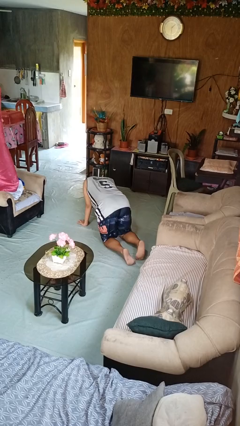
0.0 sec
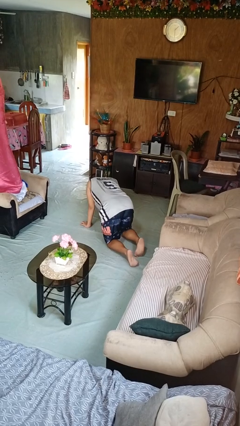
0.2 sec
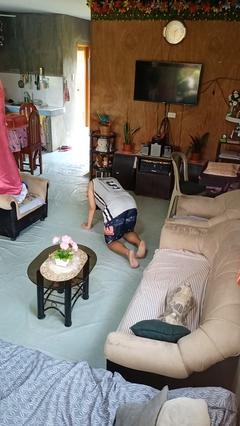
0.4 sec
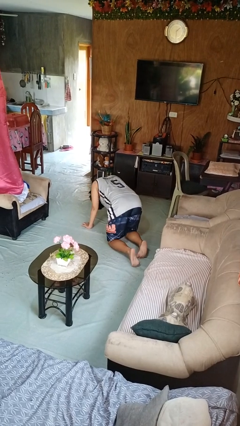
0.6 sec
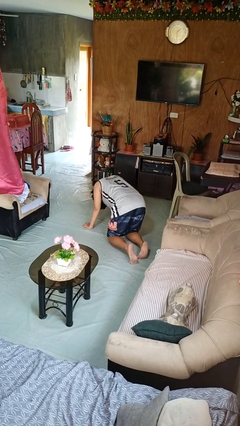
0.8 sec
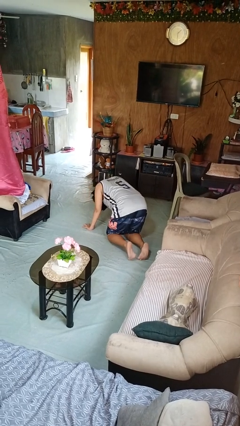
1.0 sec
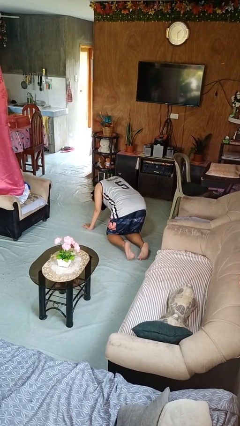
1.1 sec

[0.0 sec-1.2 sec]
person crawls

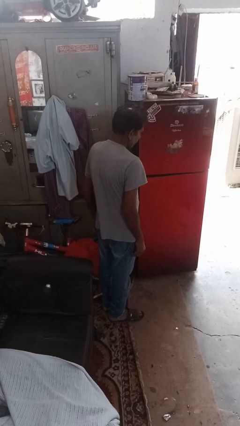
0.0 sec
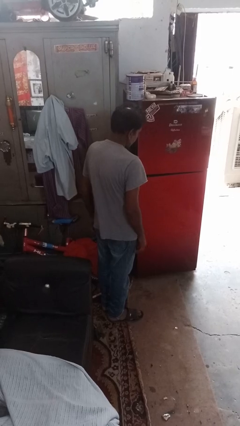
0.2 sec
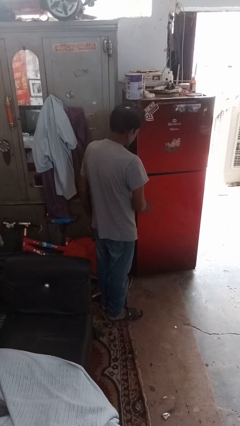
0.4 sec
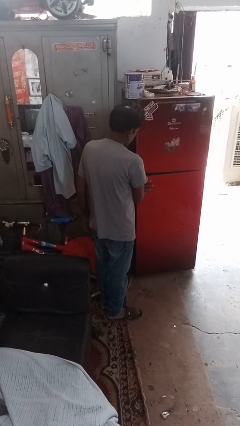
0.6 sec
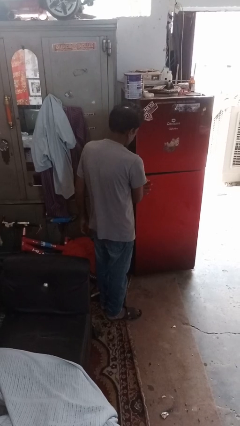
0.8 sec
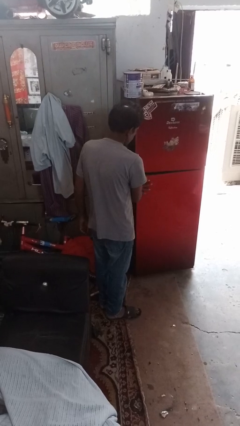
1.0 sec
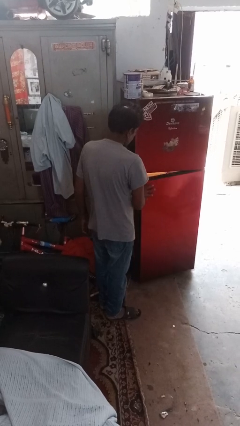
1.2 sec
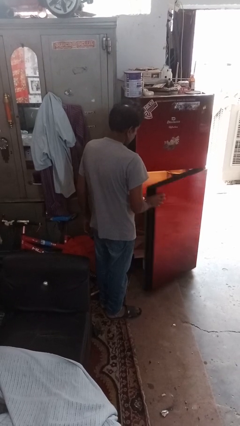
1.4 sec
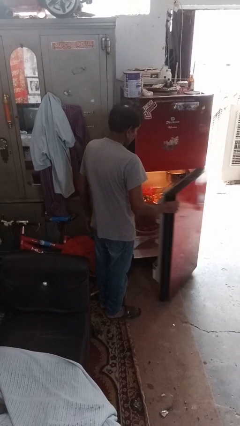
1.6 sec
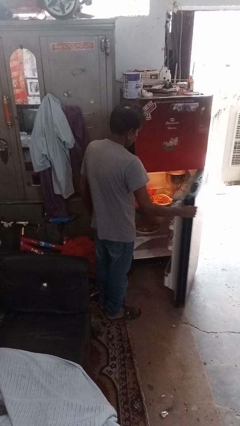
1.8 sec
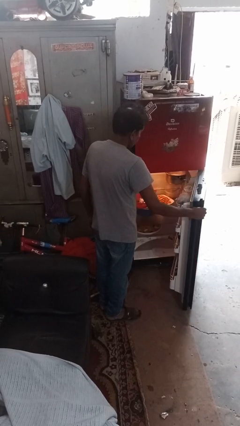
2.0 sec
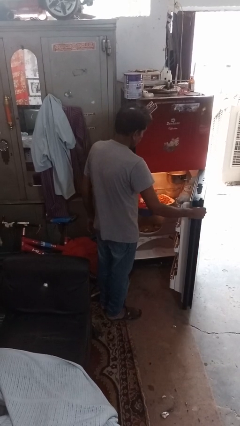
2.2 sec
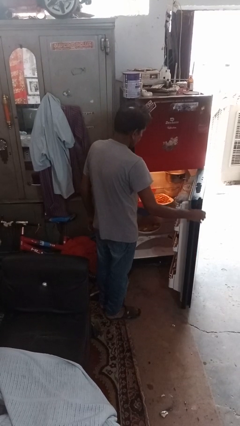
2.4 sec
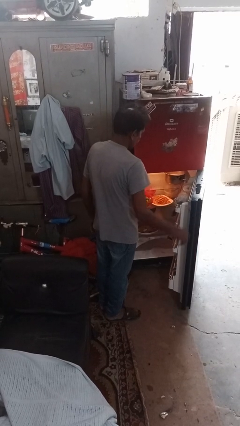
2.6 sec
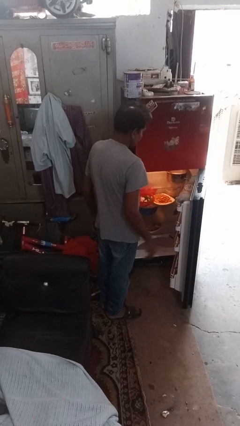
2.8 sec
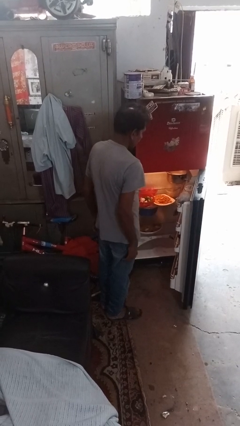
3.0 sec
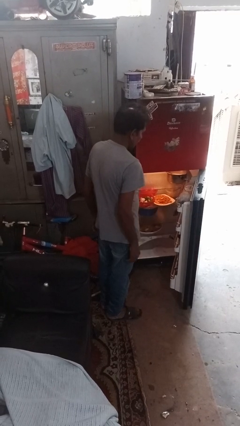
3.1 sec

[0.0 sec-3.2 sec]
person opens refrigerator

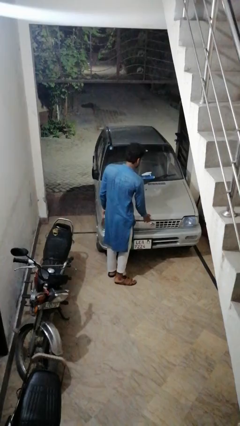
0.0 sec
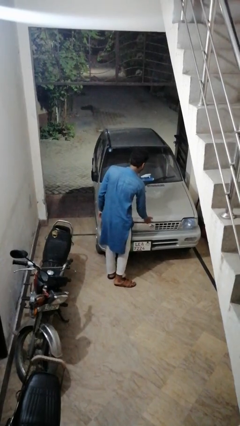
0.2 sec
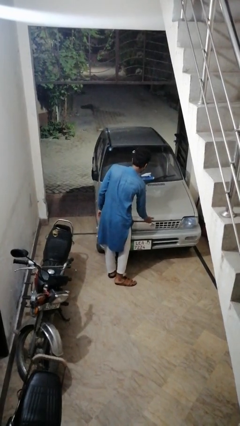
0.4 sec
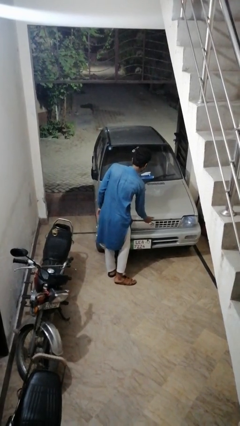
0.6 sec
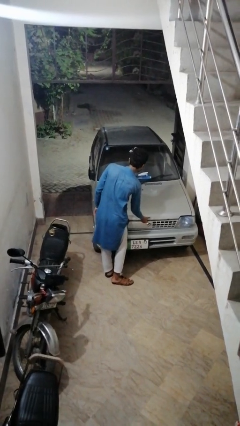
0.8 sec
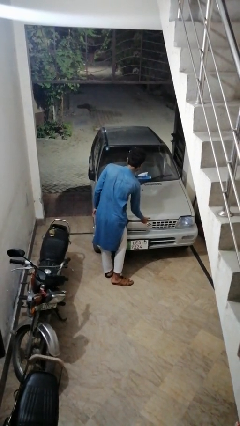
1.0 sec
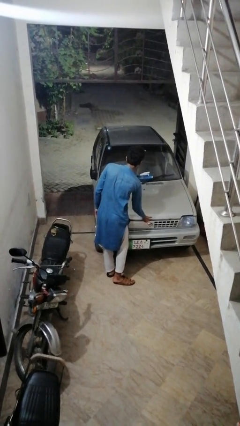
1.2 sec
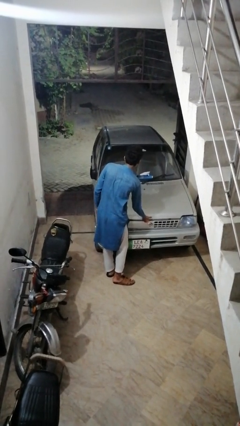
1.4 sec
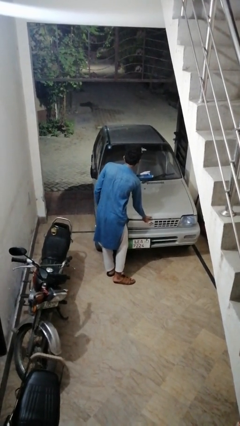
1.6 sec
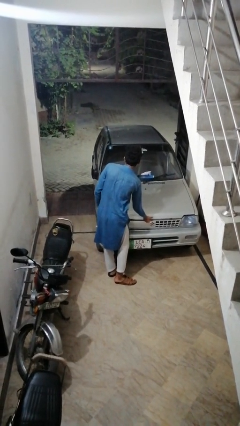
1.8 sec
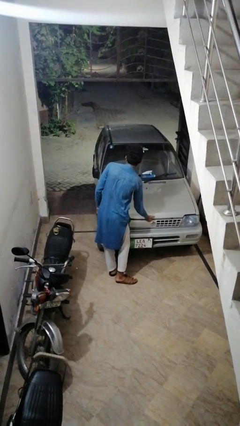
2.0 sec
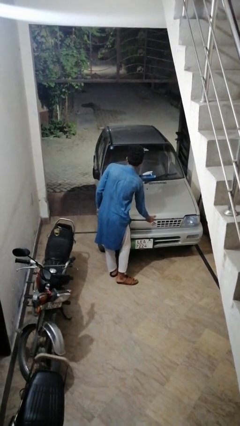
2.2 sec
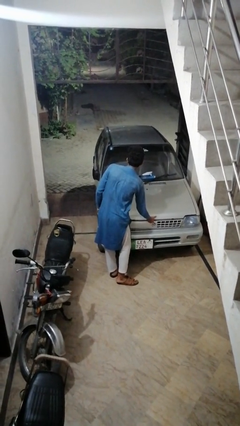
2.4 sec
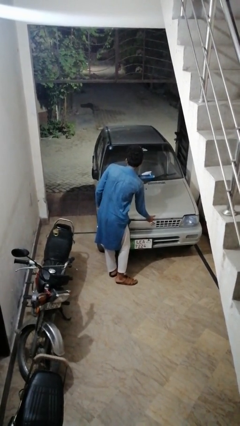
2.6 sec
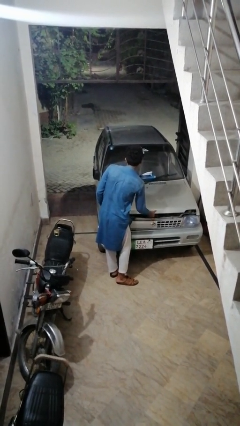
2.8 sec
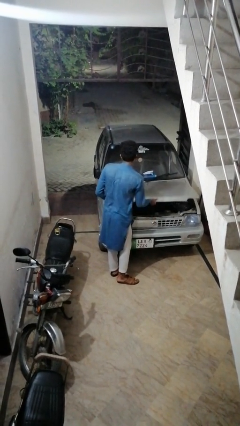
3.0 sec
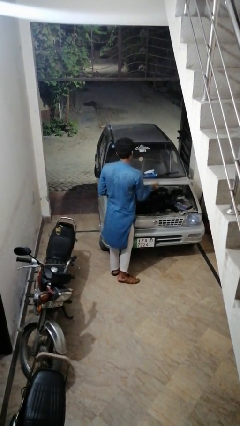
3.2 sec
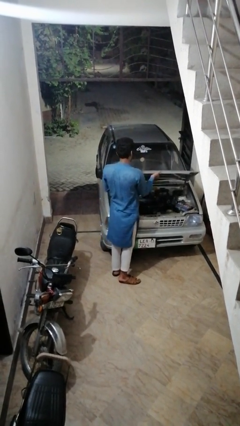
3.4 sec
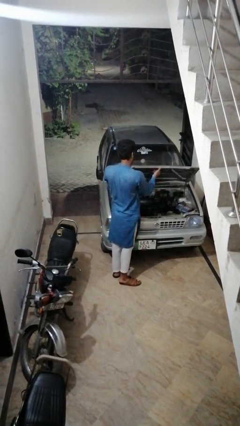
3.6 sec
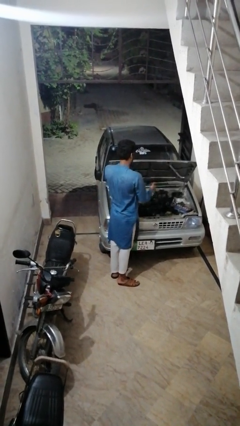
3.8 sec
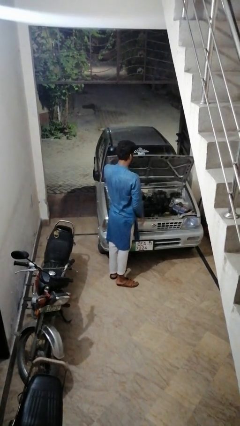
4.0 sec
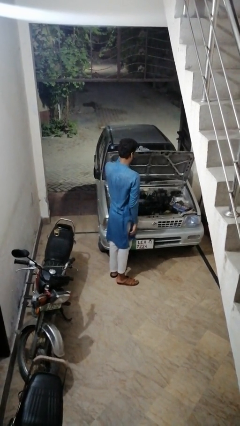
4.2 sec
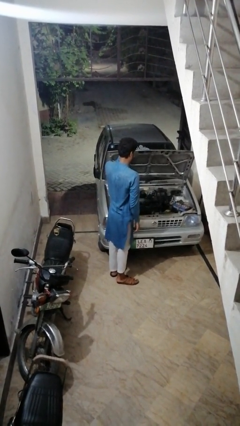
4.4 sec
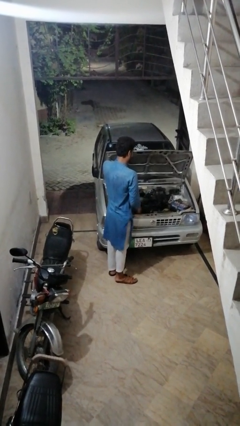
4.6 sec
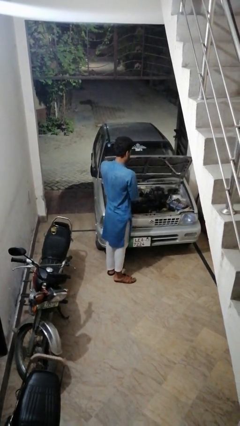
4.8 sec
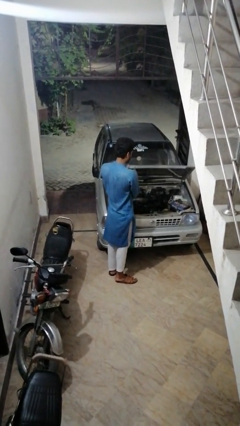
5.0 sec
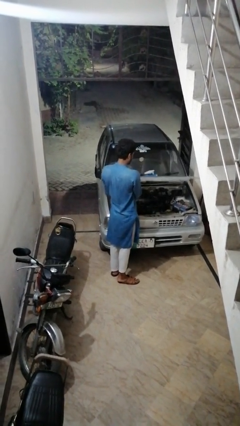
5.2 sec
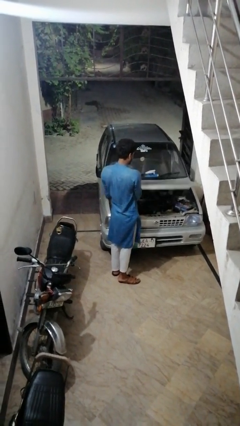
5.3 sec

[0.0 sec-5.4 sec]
person opens car hood

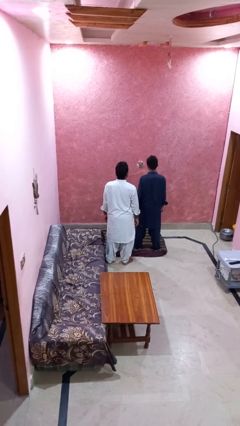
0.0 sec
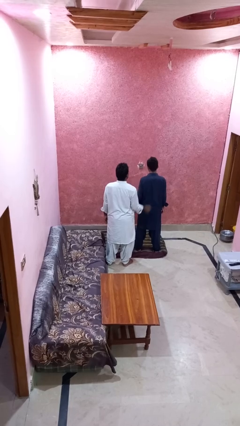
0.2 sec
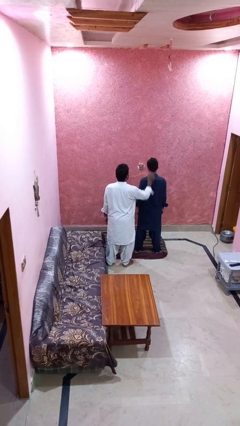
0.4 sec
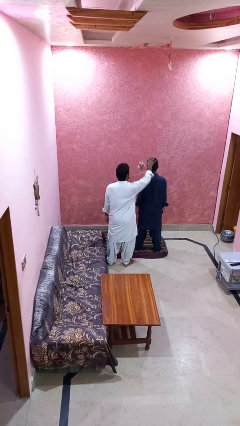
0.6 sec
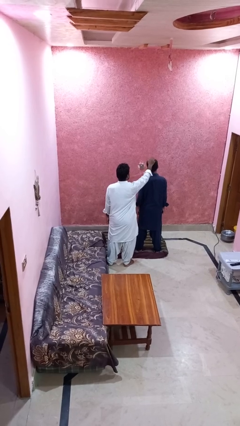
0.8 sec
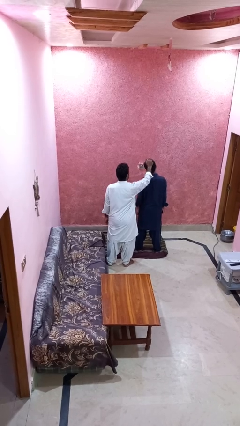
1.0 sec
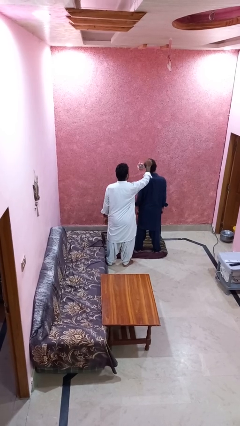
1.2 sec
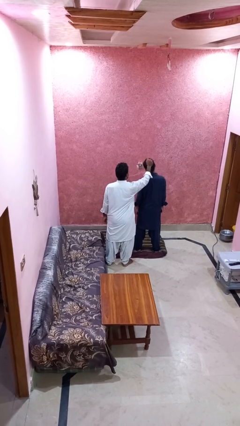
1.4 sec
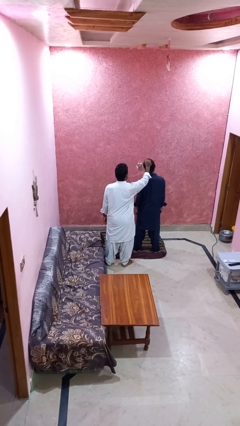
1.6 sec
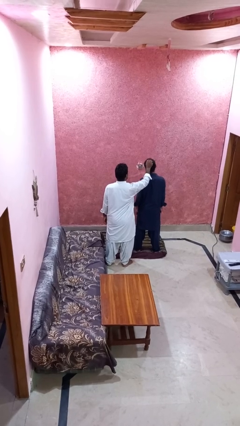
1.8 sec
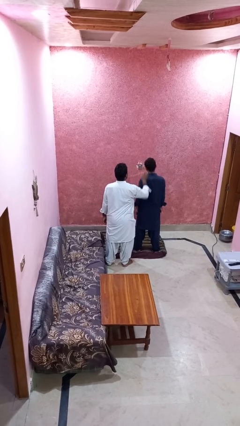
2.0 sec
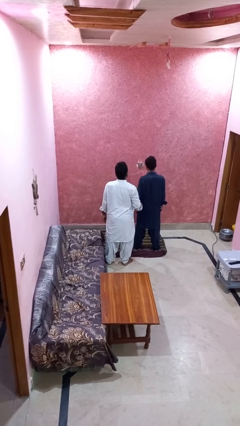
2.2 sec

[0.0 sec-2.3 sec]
person grabs person by hair

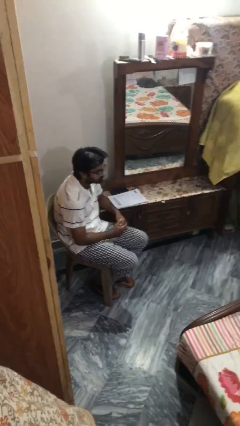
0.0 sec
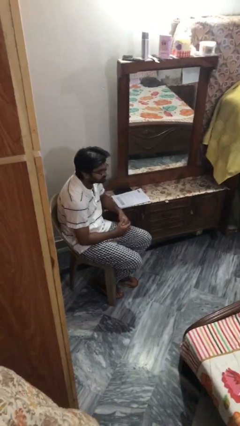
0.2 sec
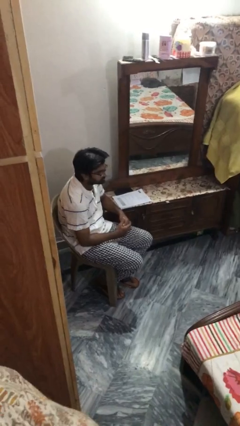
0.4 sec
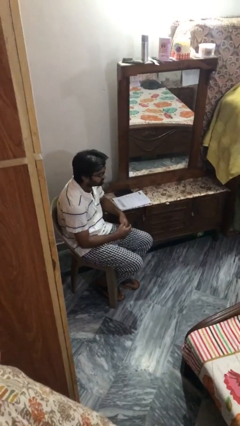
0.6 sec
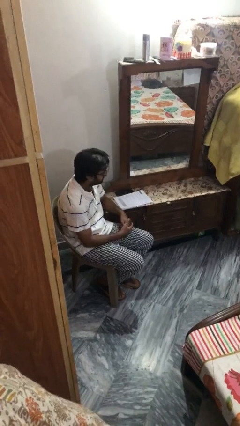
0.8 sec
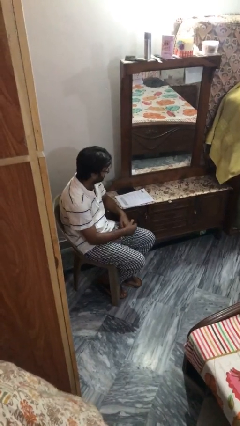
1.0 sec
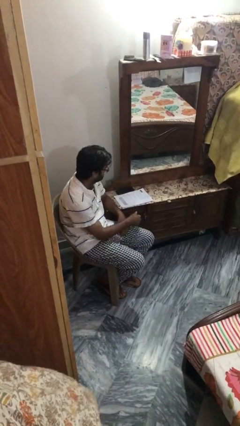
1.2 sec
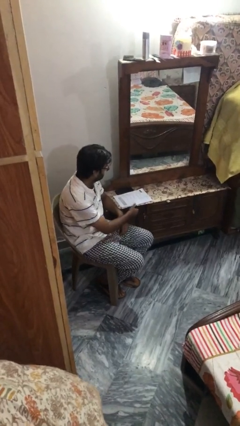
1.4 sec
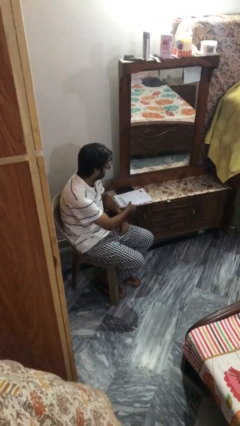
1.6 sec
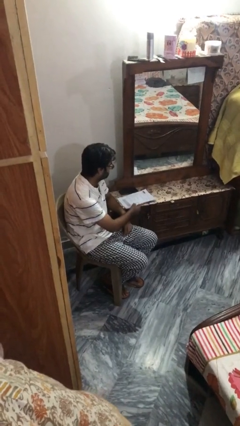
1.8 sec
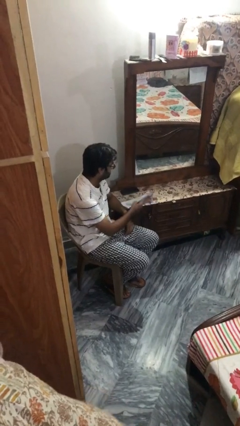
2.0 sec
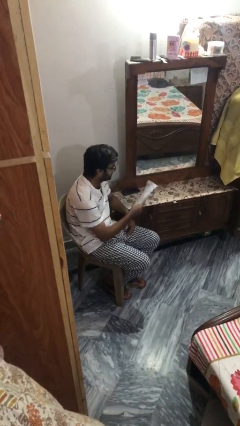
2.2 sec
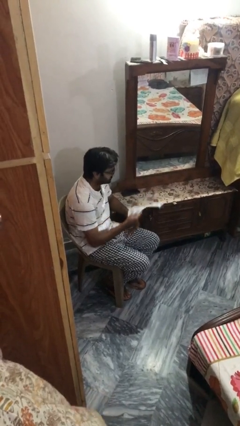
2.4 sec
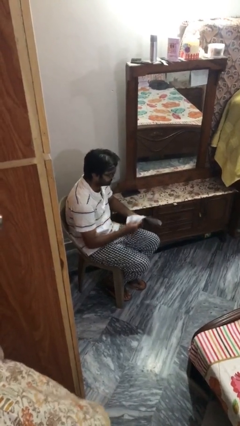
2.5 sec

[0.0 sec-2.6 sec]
person picks up object from table

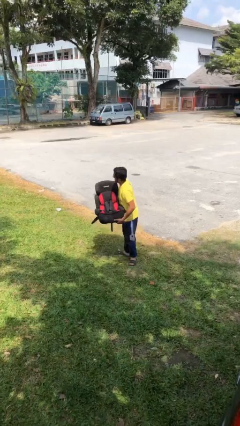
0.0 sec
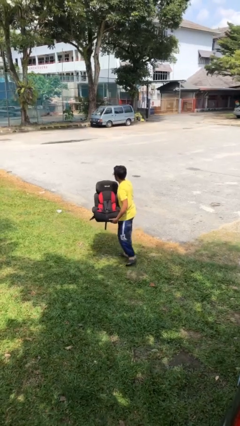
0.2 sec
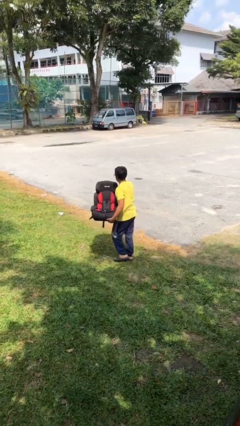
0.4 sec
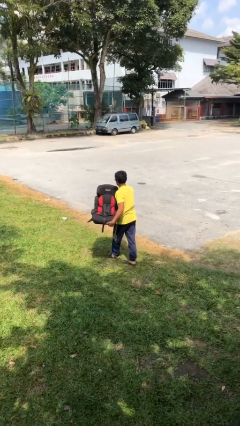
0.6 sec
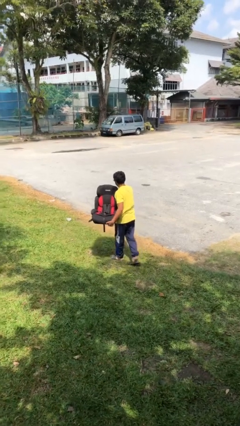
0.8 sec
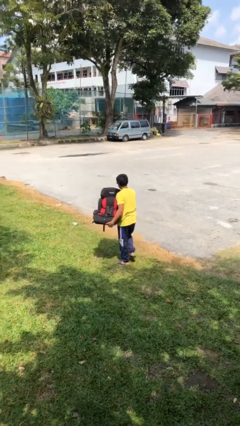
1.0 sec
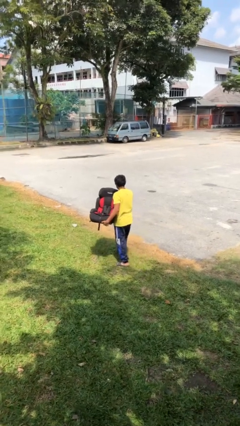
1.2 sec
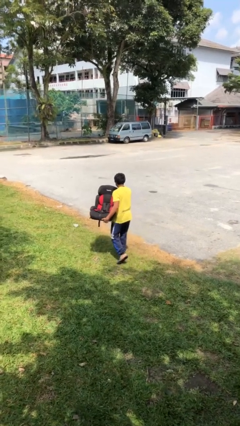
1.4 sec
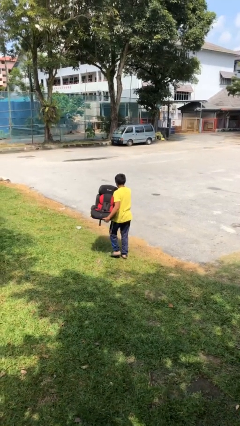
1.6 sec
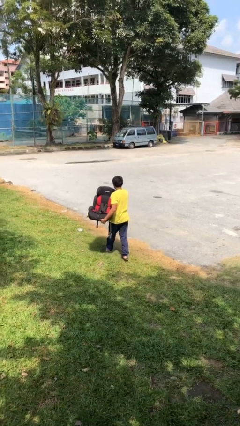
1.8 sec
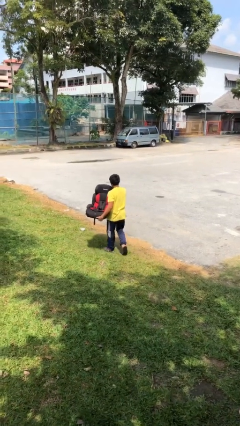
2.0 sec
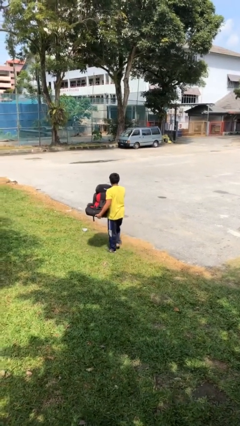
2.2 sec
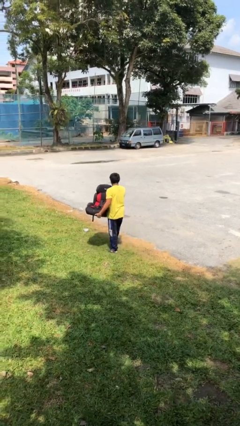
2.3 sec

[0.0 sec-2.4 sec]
person carries heavy object

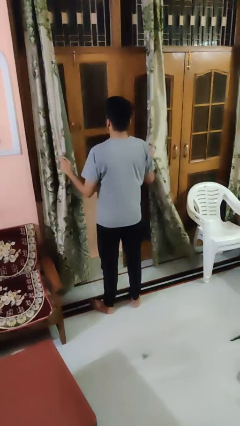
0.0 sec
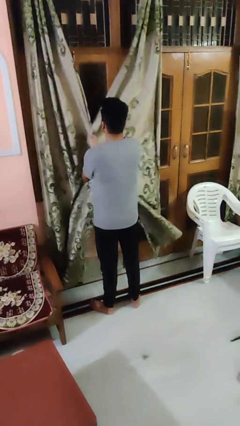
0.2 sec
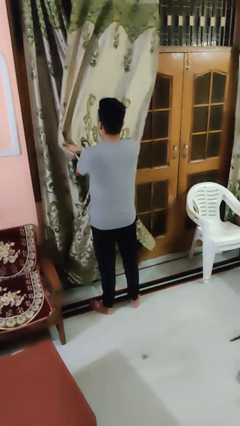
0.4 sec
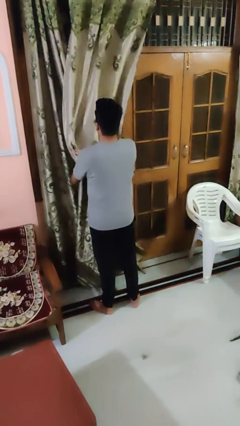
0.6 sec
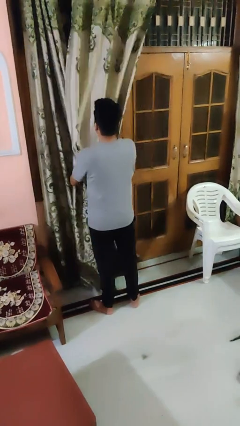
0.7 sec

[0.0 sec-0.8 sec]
person closes curtains
